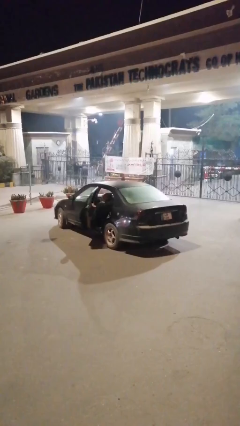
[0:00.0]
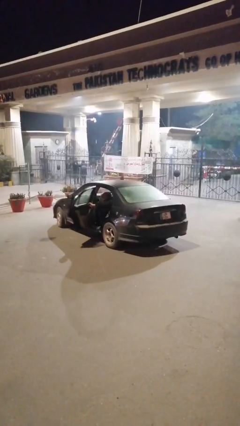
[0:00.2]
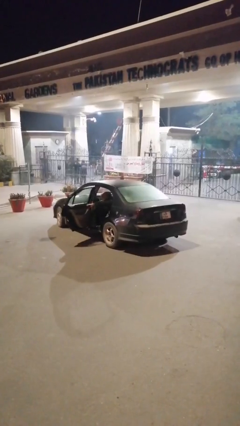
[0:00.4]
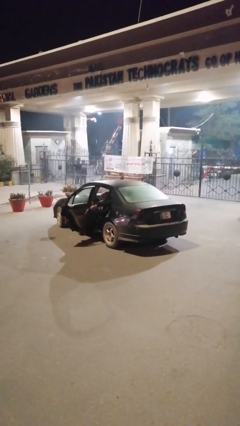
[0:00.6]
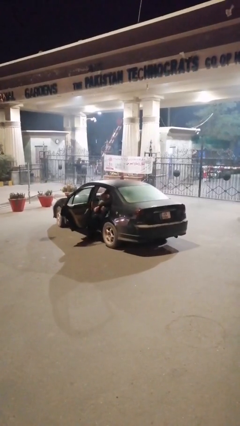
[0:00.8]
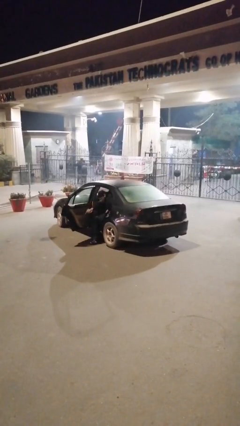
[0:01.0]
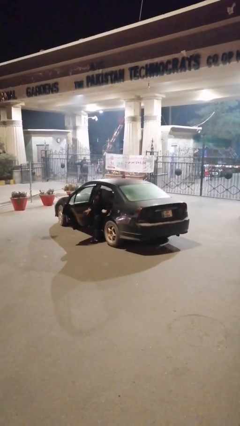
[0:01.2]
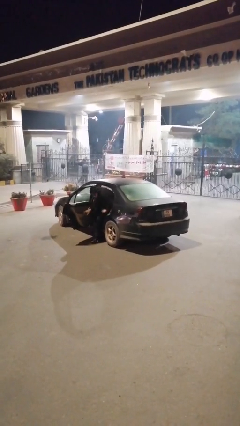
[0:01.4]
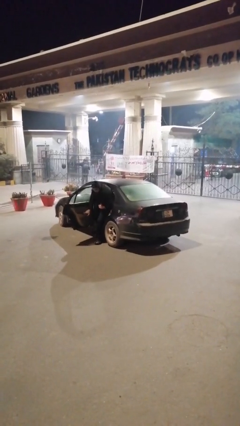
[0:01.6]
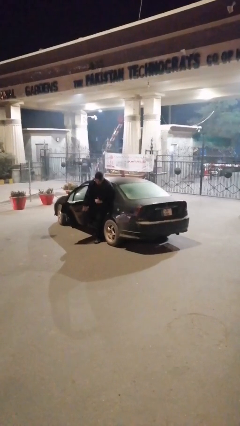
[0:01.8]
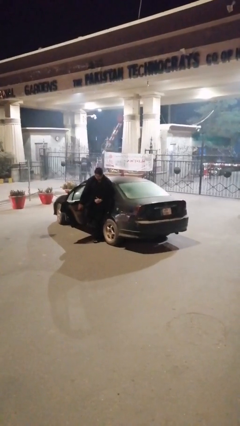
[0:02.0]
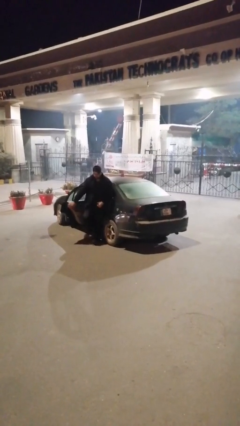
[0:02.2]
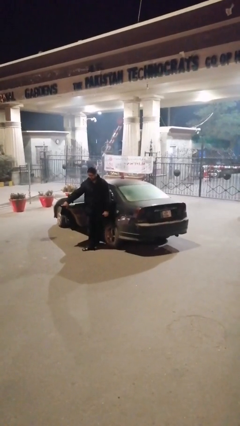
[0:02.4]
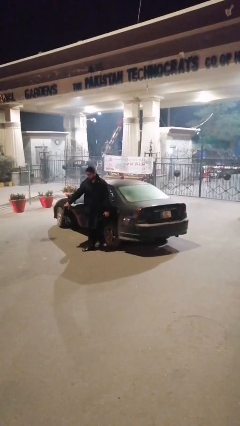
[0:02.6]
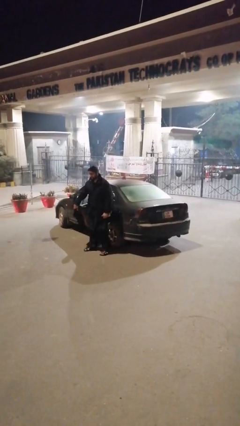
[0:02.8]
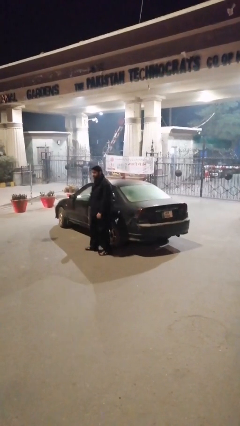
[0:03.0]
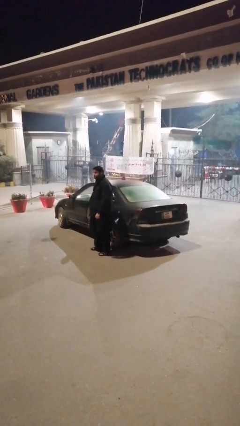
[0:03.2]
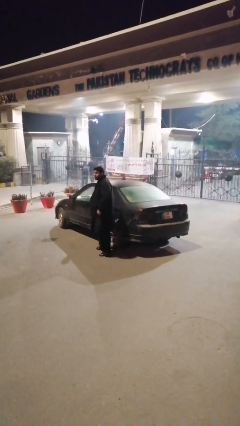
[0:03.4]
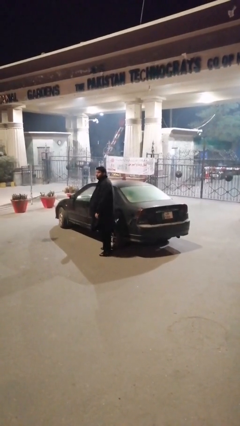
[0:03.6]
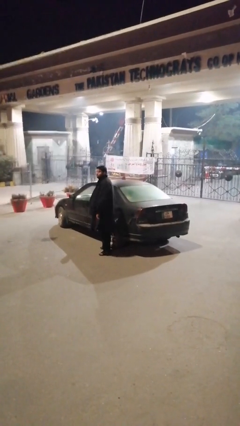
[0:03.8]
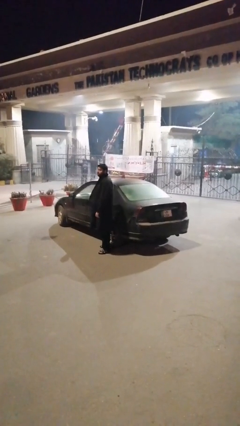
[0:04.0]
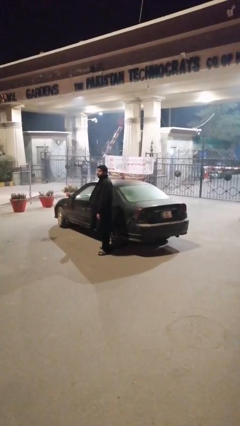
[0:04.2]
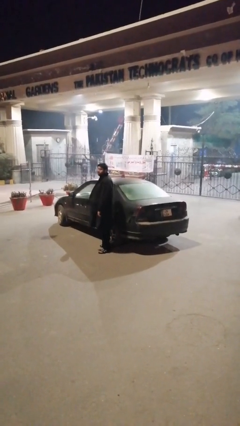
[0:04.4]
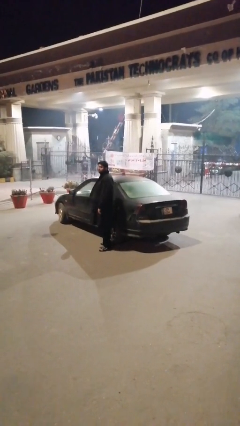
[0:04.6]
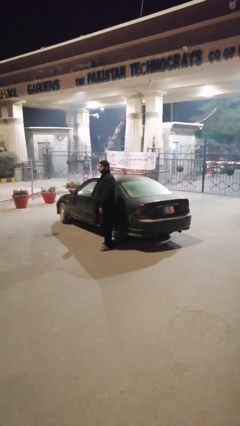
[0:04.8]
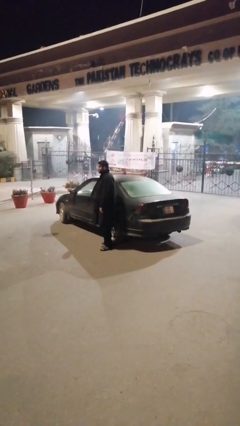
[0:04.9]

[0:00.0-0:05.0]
car drops off person

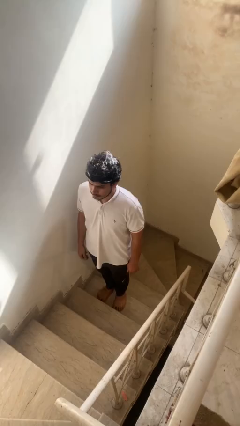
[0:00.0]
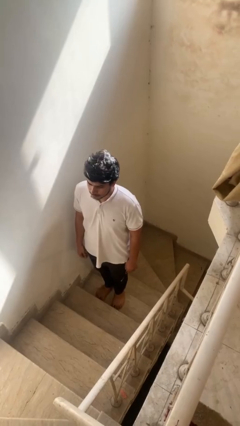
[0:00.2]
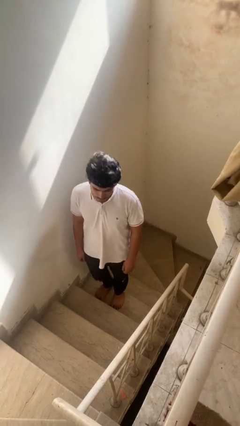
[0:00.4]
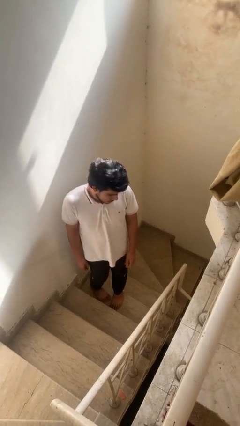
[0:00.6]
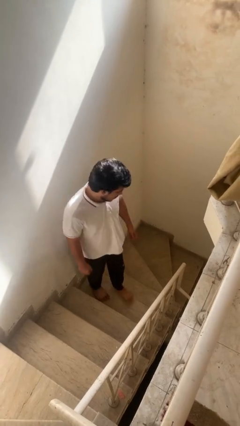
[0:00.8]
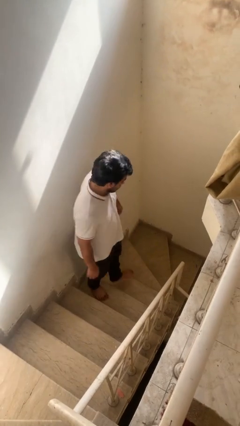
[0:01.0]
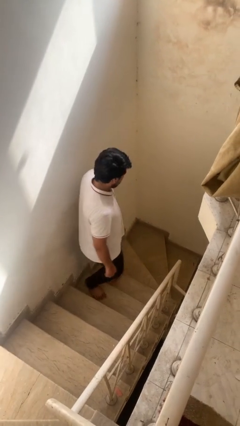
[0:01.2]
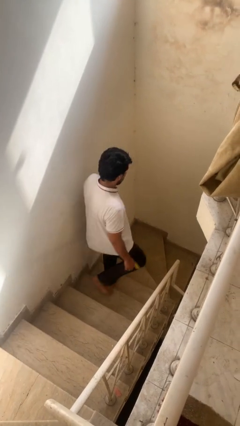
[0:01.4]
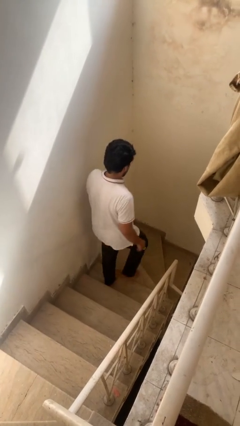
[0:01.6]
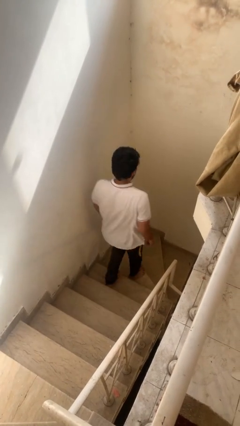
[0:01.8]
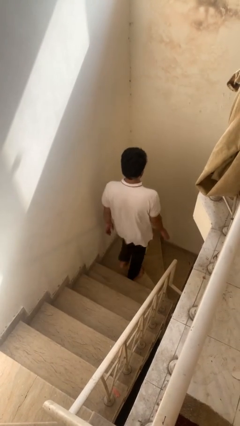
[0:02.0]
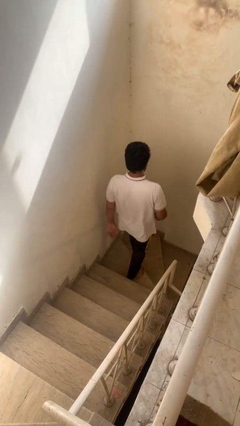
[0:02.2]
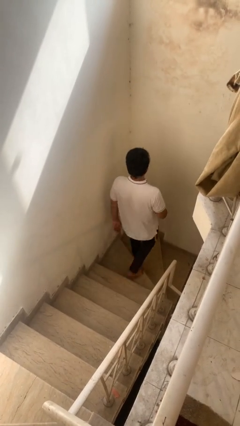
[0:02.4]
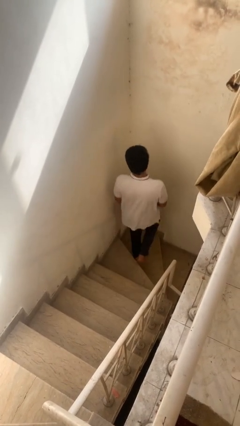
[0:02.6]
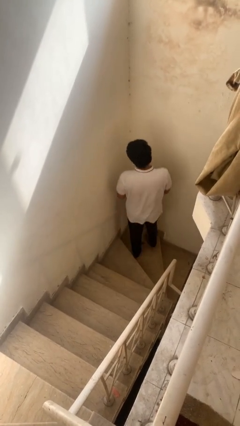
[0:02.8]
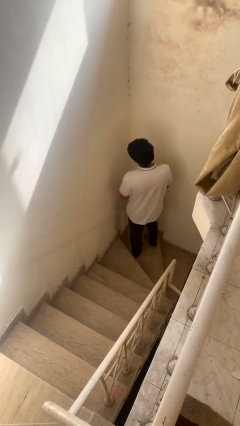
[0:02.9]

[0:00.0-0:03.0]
person climbs down stairs

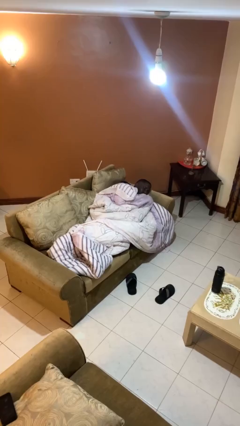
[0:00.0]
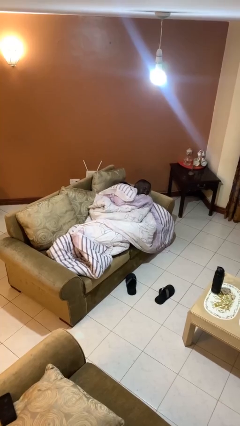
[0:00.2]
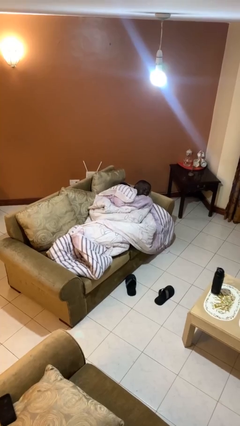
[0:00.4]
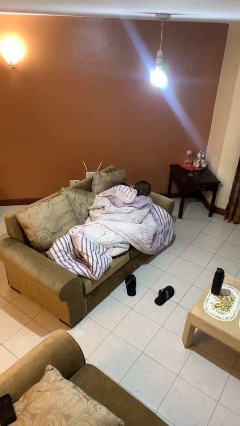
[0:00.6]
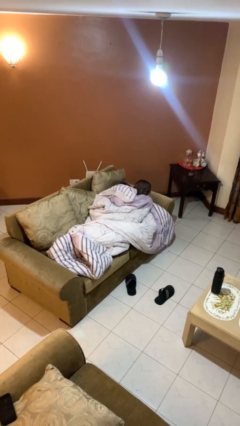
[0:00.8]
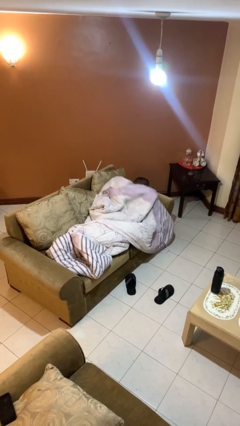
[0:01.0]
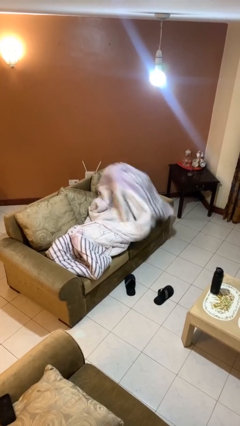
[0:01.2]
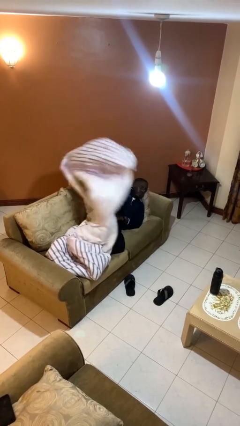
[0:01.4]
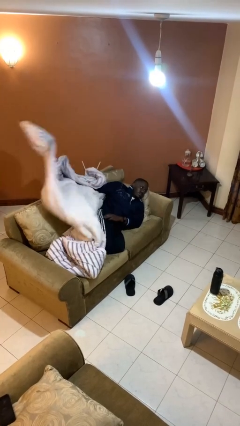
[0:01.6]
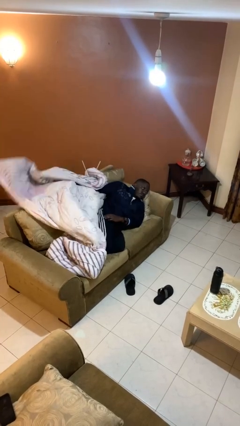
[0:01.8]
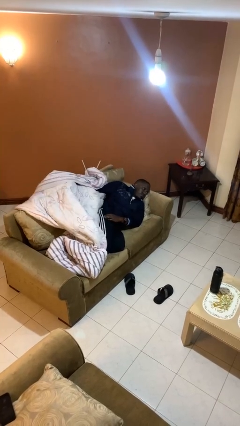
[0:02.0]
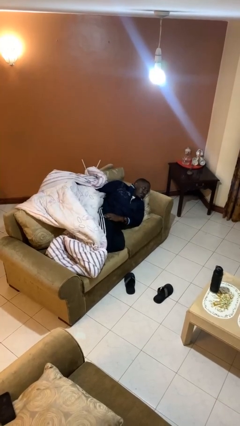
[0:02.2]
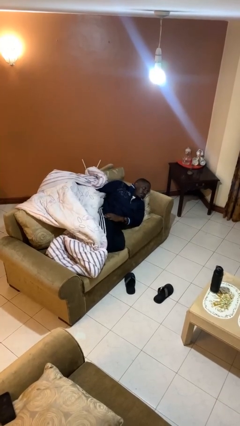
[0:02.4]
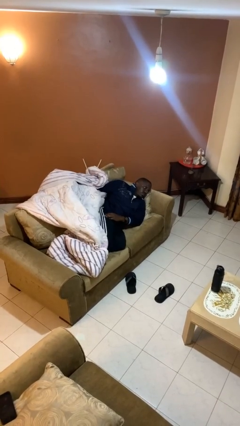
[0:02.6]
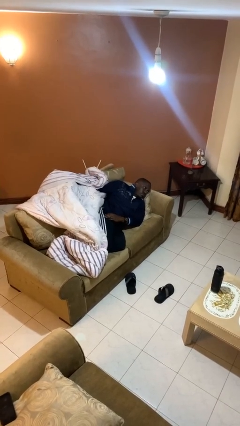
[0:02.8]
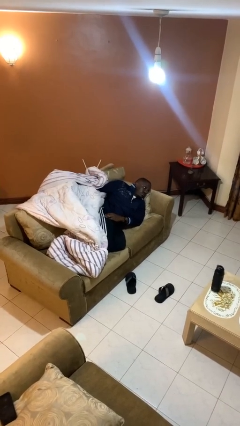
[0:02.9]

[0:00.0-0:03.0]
person uncovers with blanket

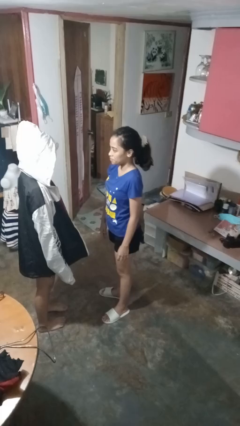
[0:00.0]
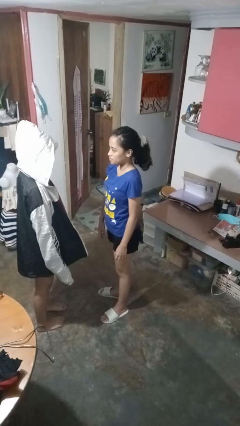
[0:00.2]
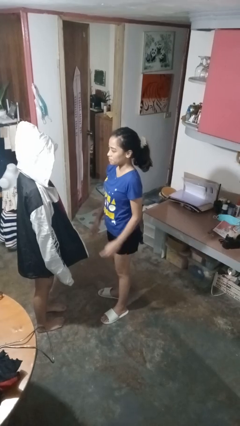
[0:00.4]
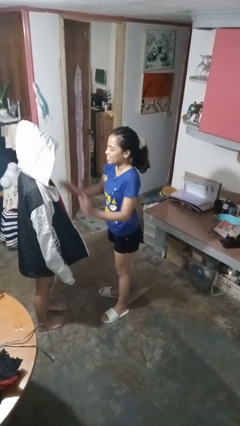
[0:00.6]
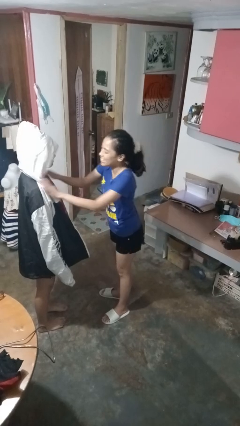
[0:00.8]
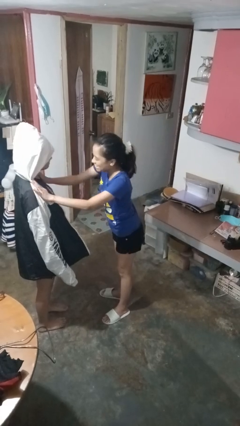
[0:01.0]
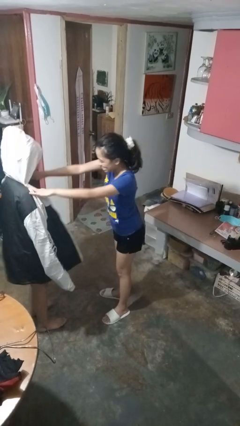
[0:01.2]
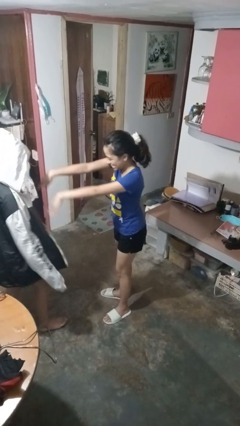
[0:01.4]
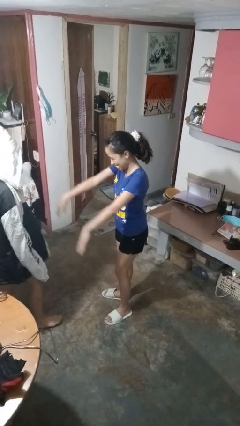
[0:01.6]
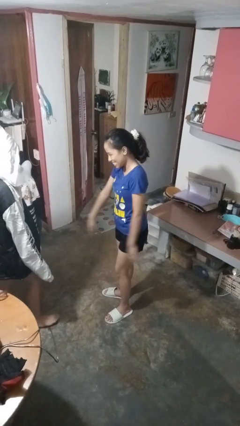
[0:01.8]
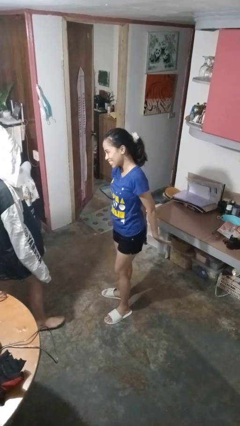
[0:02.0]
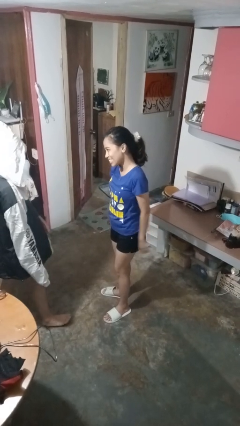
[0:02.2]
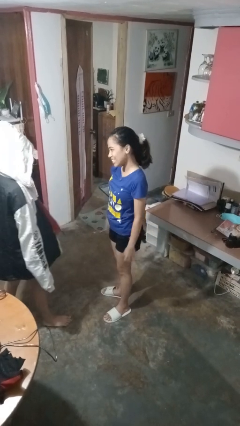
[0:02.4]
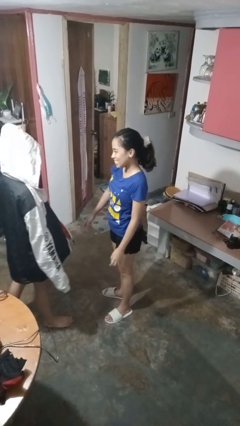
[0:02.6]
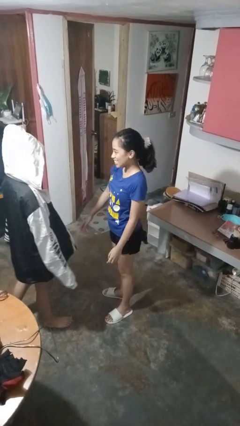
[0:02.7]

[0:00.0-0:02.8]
person shoves person

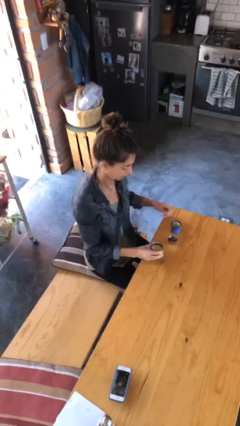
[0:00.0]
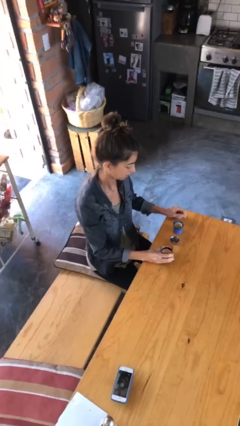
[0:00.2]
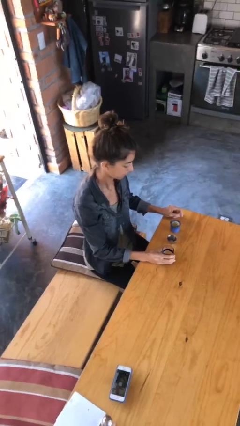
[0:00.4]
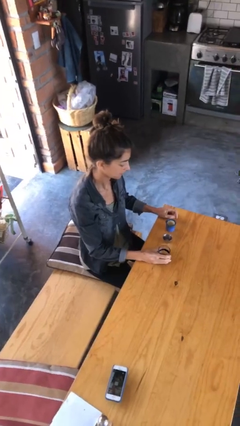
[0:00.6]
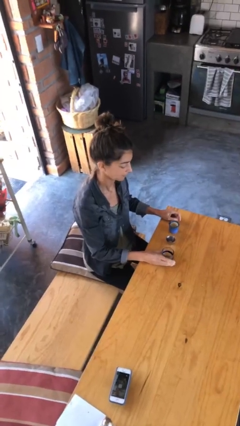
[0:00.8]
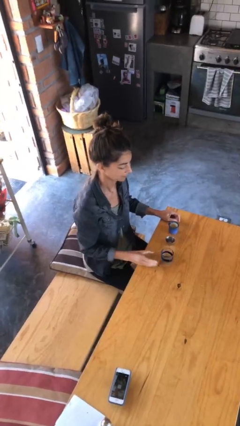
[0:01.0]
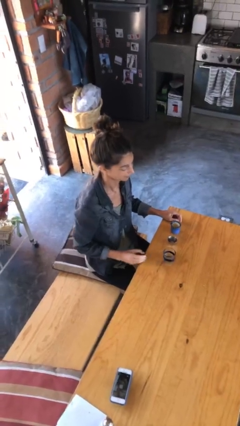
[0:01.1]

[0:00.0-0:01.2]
person puts down object on table

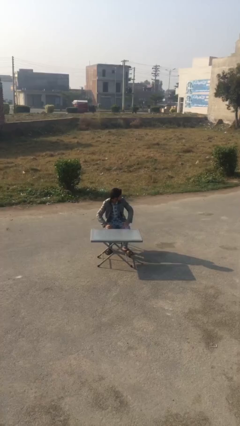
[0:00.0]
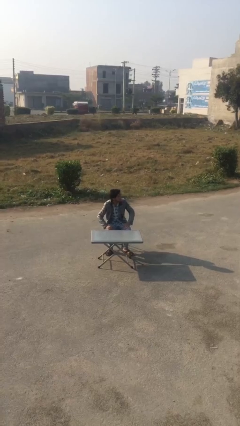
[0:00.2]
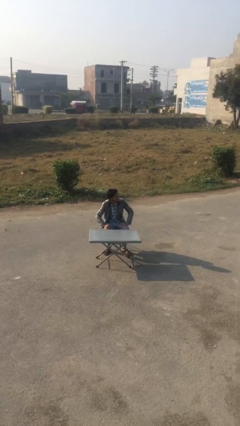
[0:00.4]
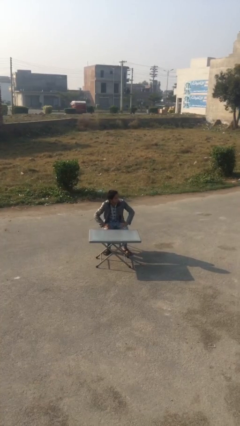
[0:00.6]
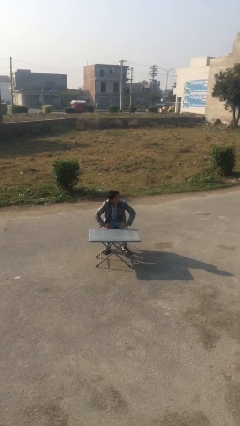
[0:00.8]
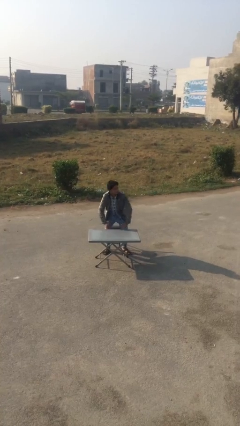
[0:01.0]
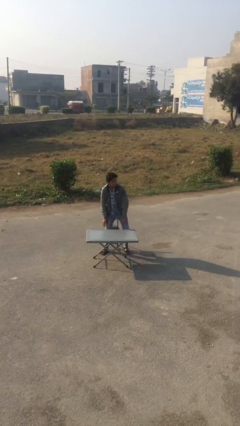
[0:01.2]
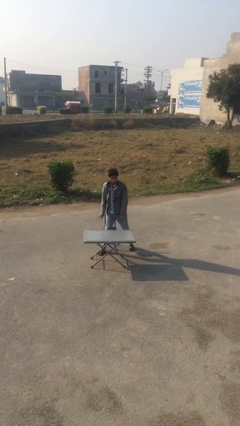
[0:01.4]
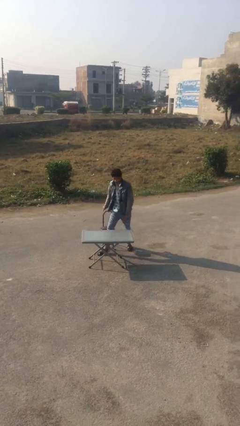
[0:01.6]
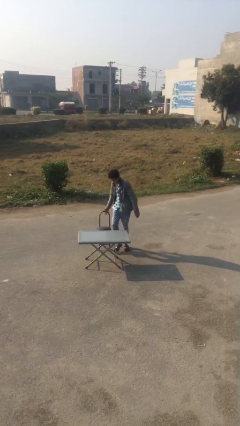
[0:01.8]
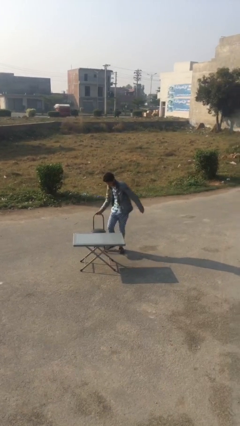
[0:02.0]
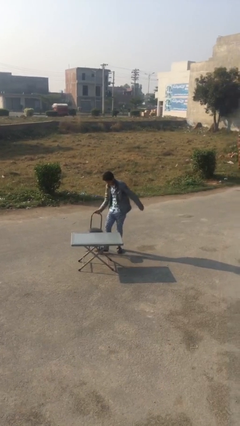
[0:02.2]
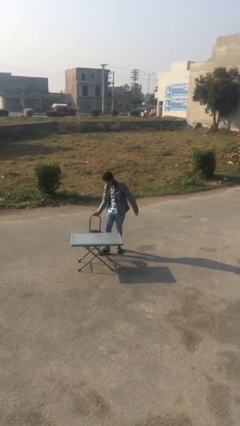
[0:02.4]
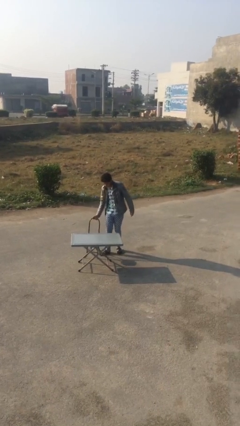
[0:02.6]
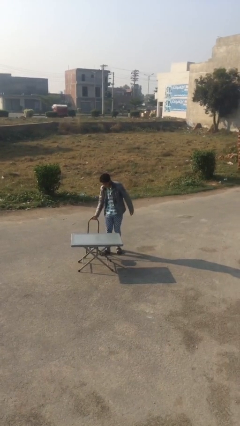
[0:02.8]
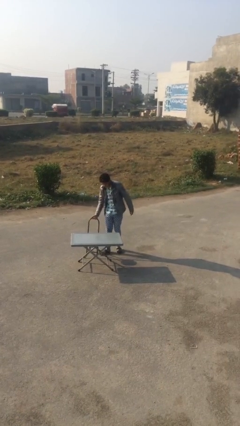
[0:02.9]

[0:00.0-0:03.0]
person stands up
